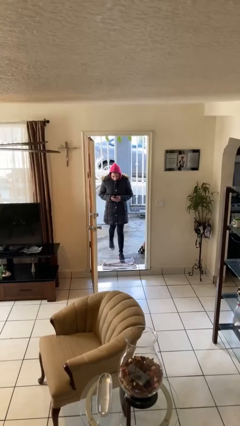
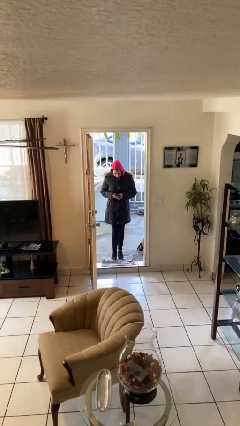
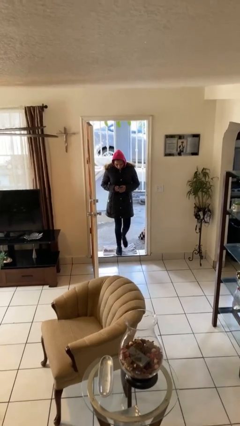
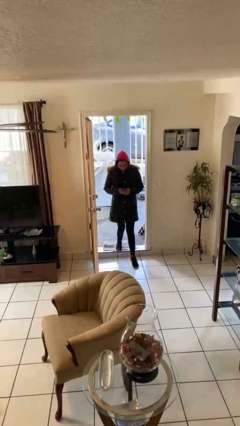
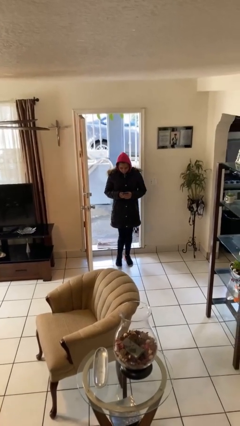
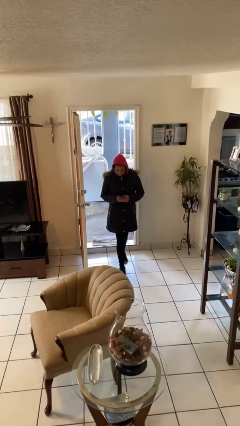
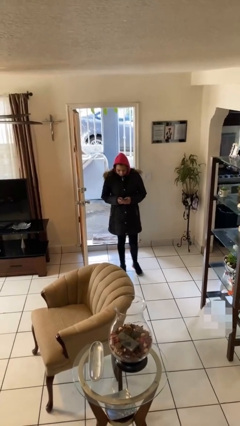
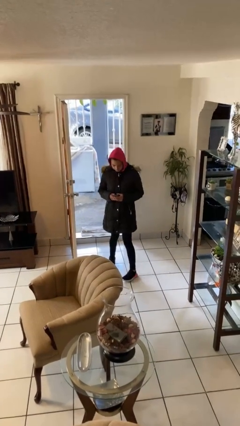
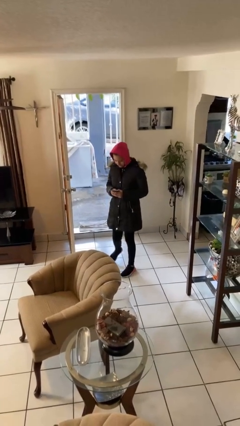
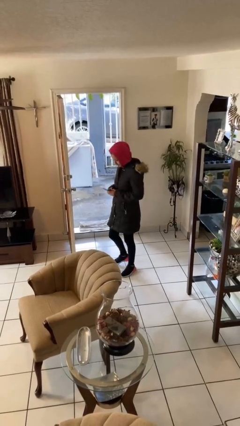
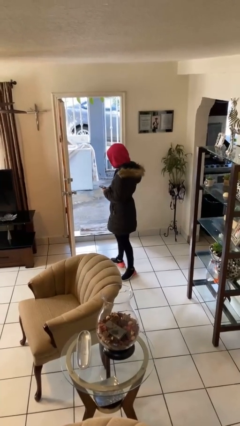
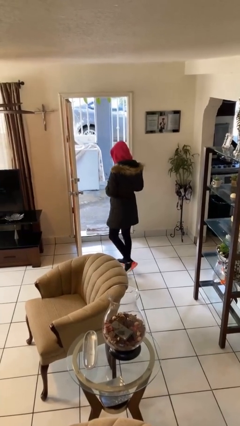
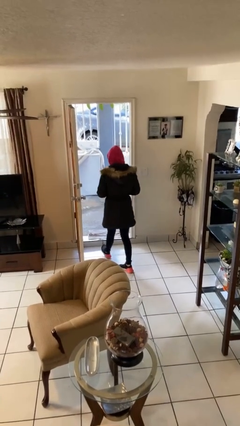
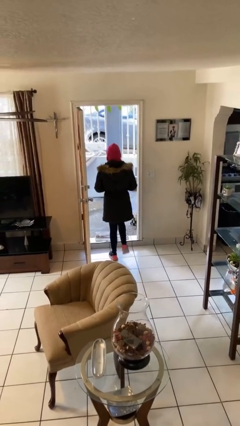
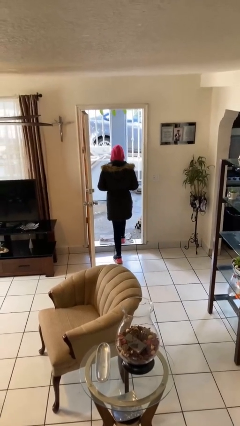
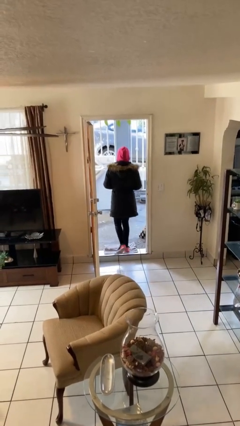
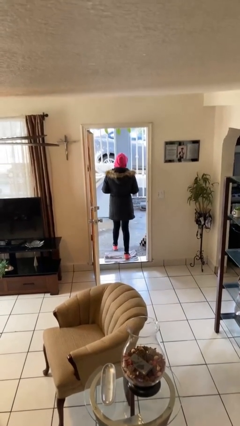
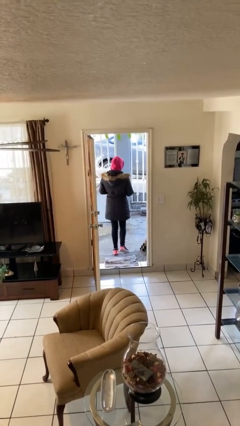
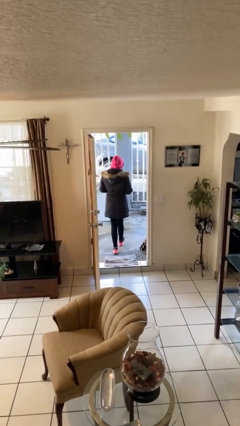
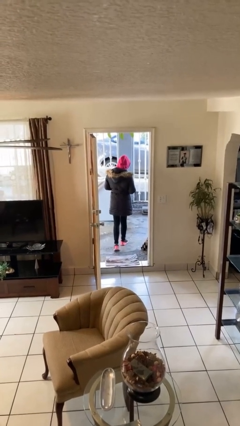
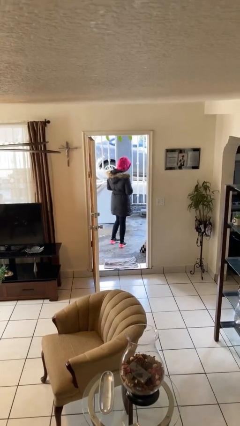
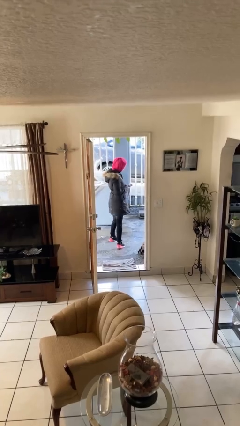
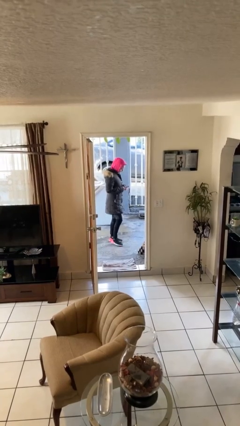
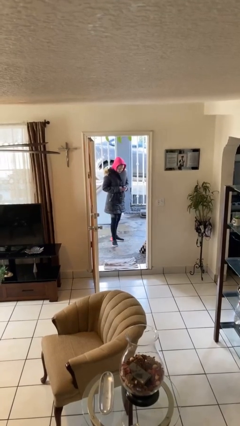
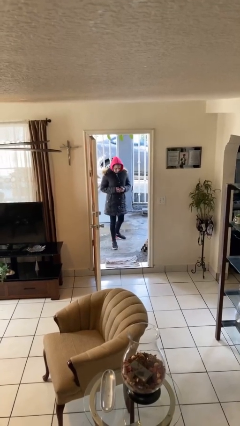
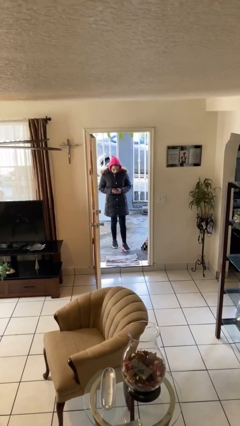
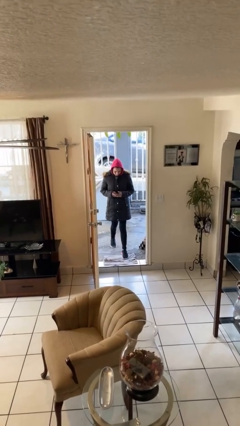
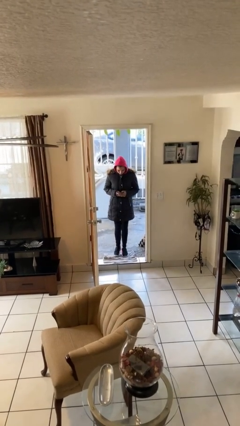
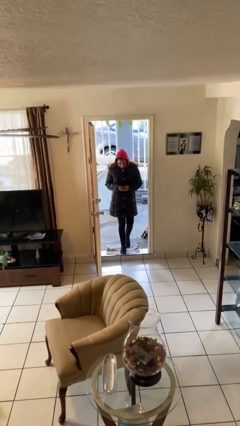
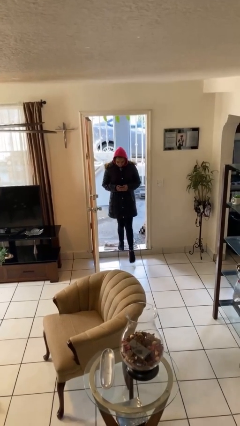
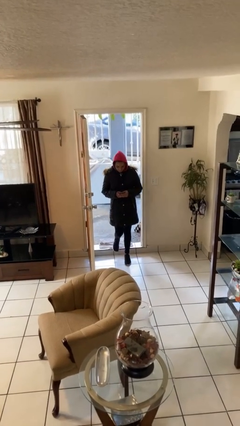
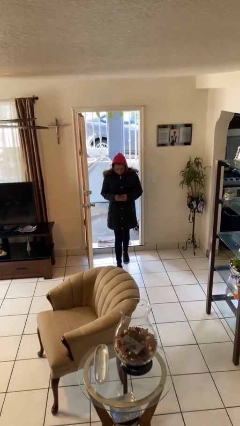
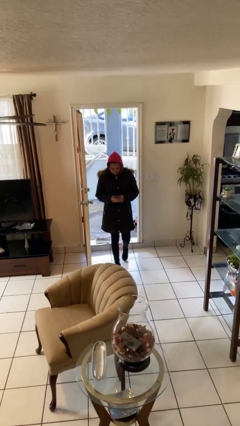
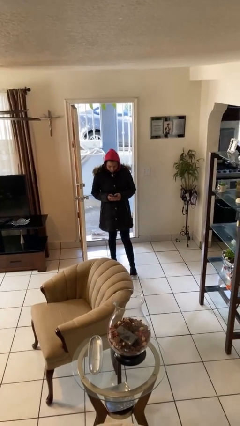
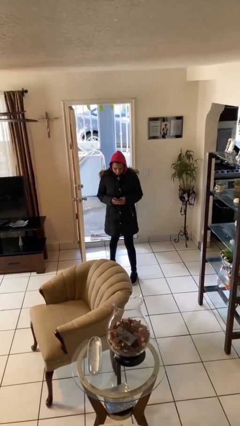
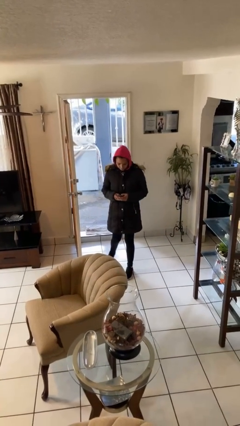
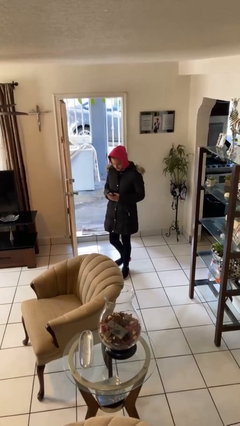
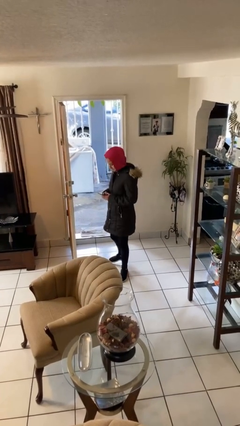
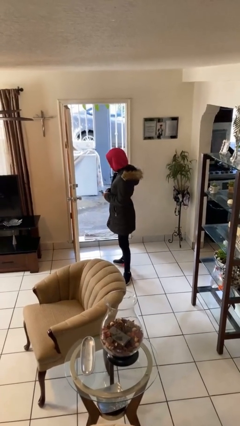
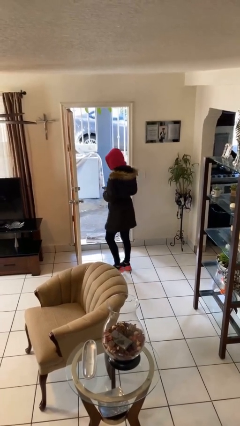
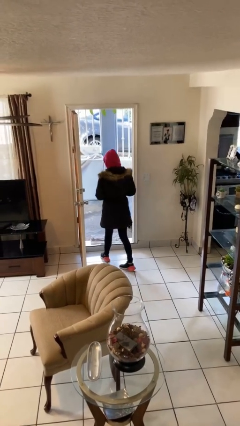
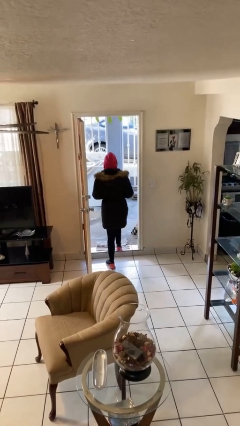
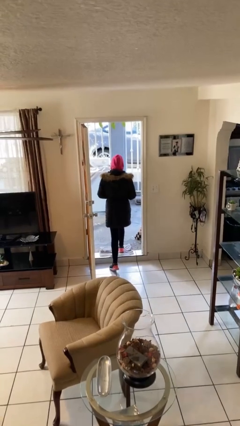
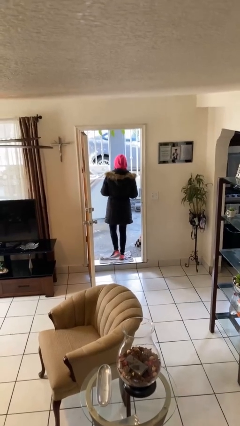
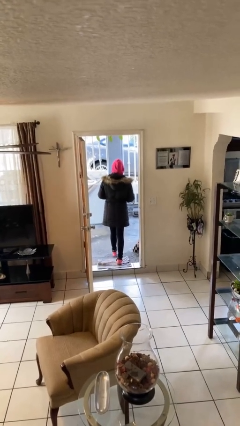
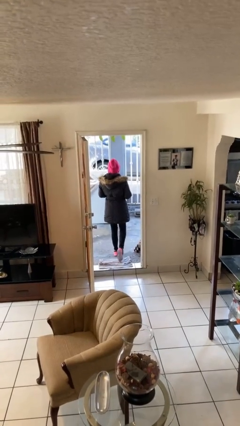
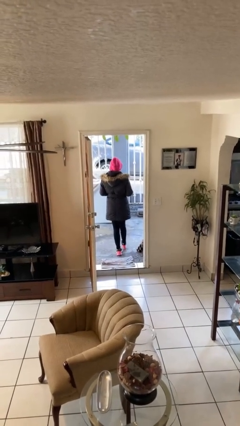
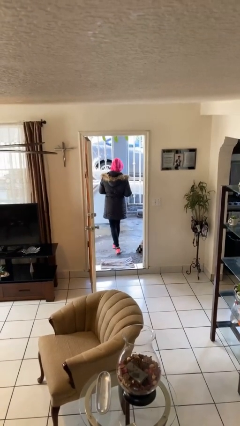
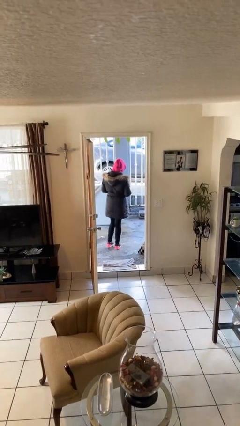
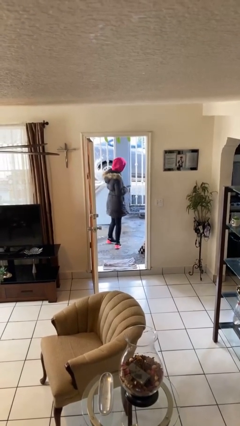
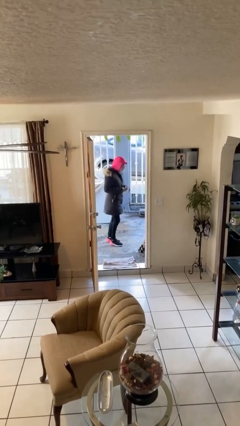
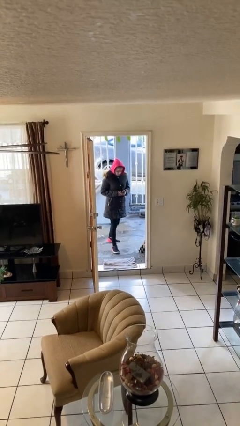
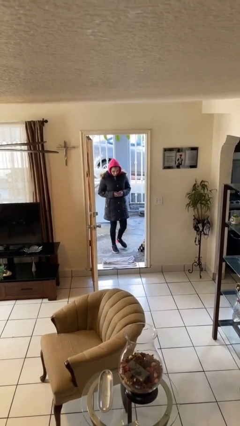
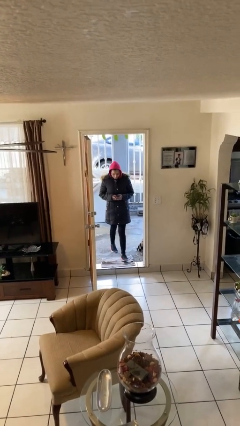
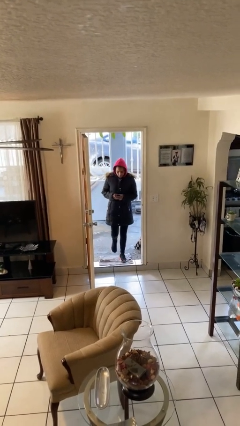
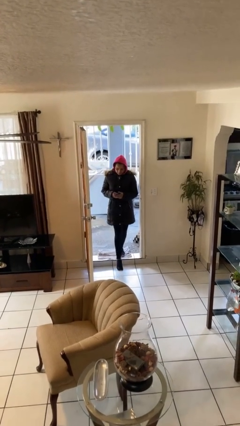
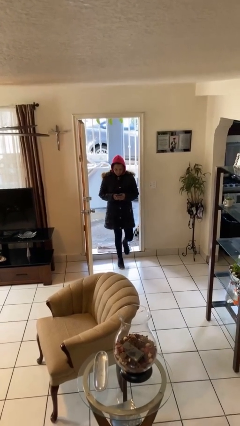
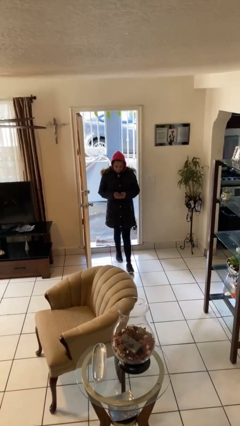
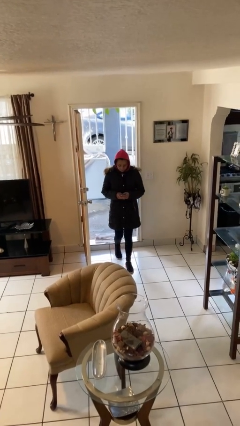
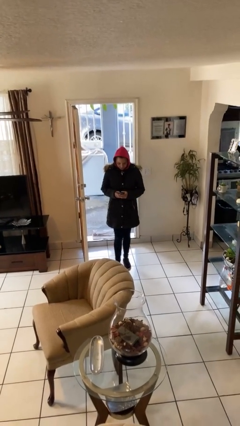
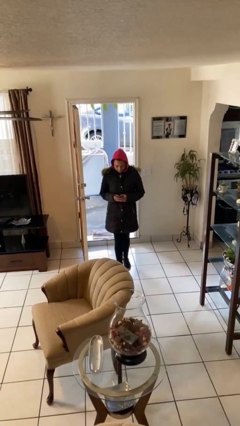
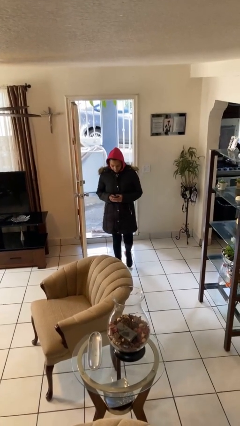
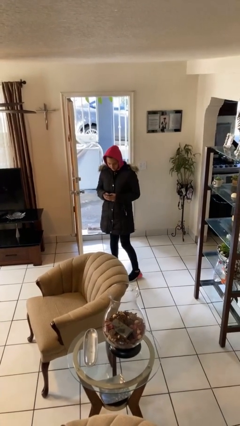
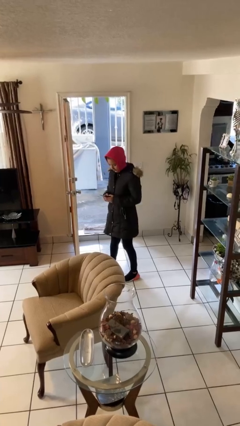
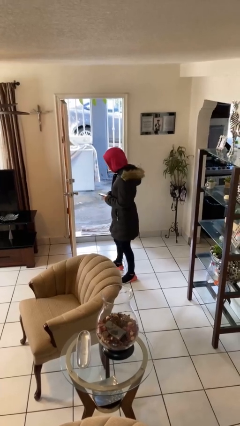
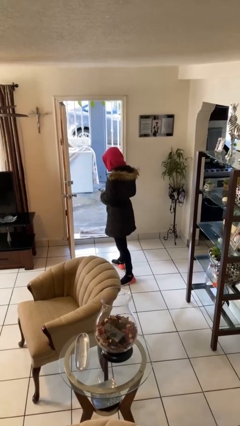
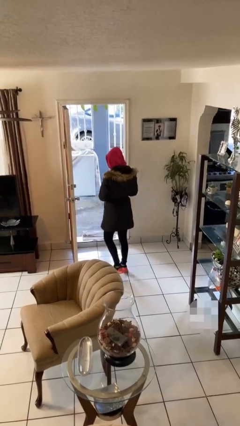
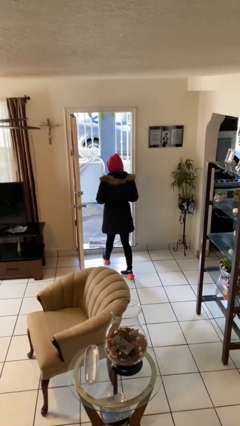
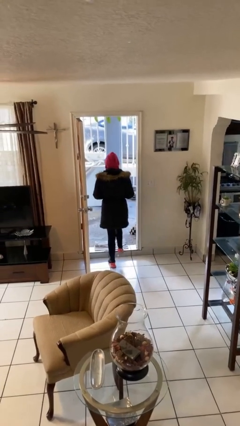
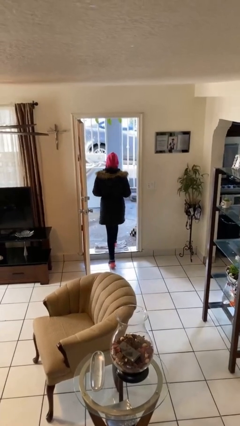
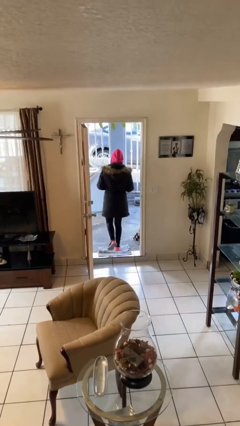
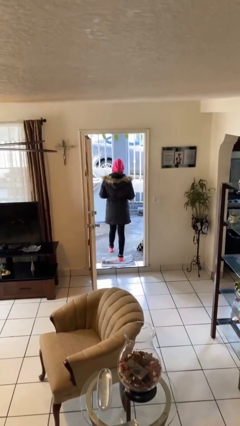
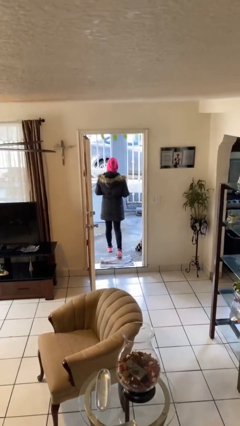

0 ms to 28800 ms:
person texts on phone

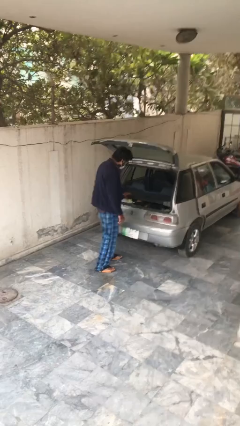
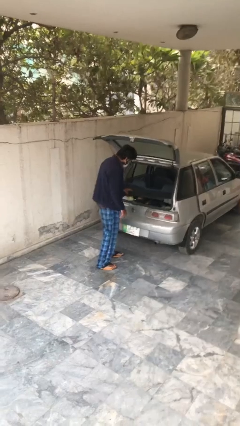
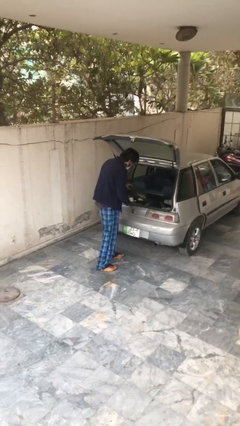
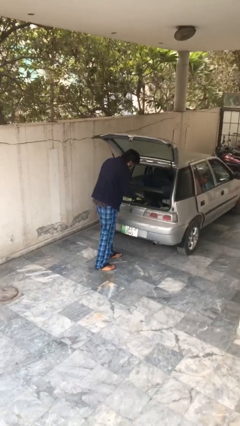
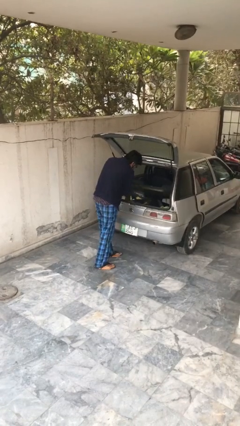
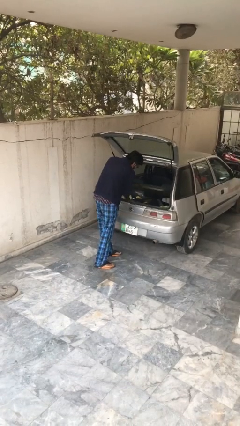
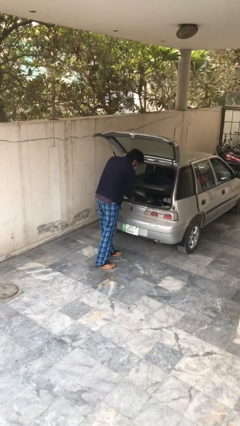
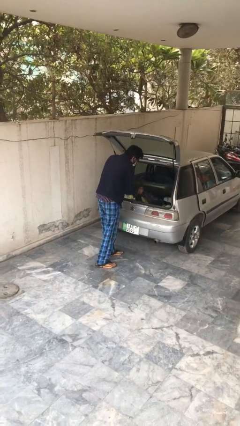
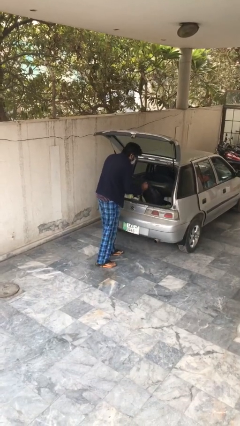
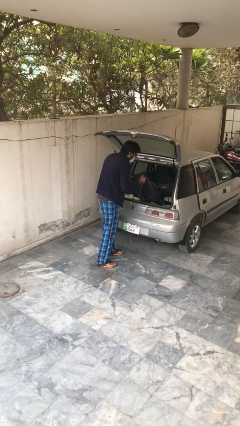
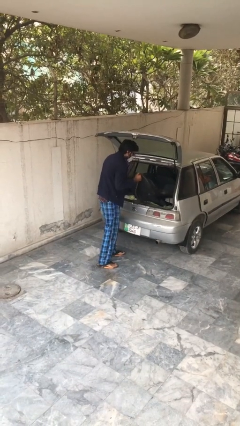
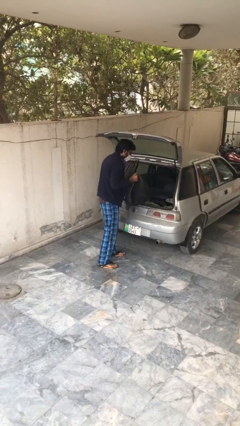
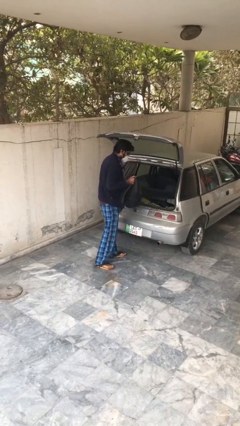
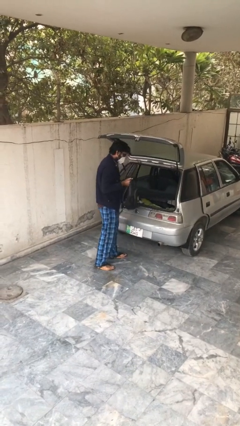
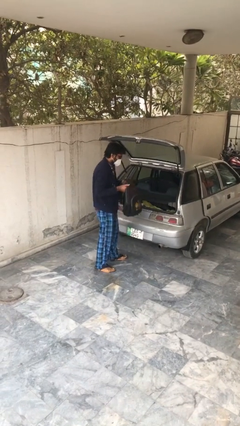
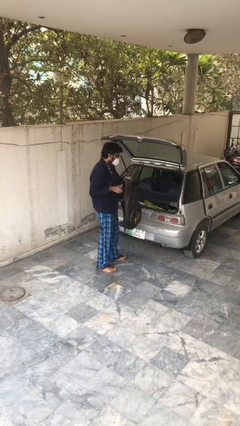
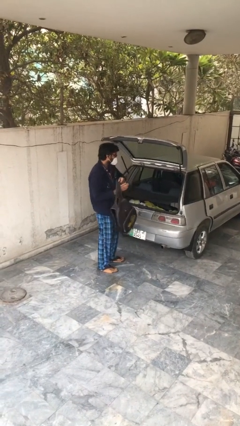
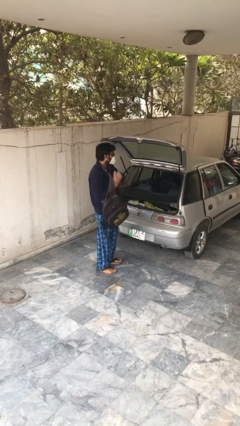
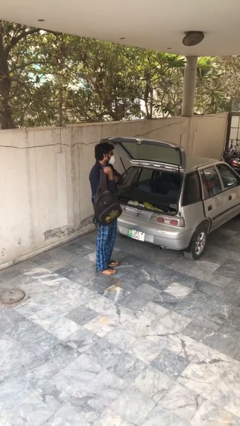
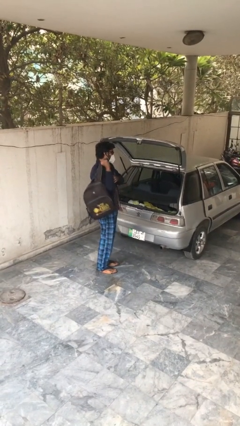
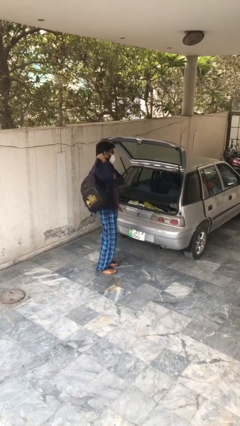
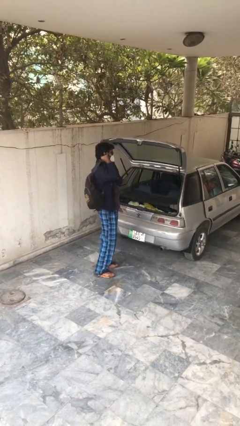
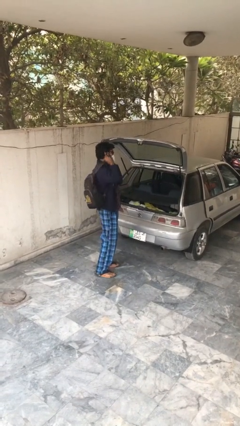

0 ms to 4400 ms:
person unloads car
